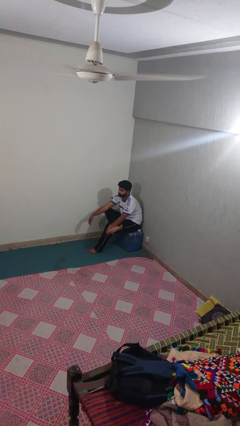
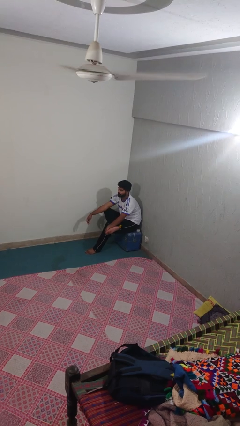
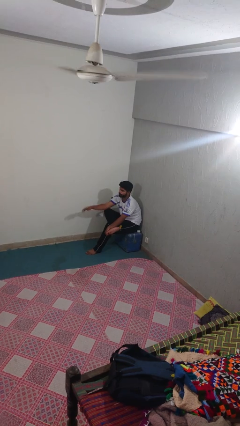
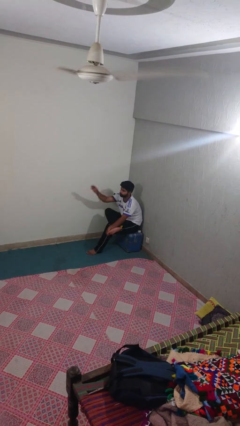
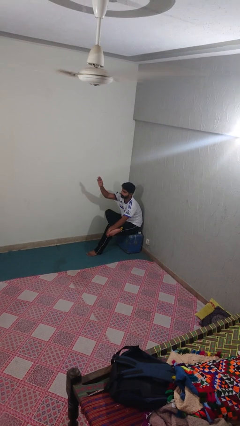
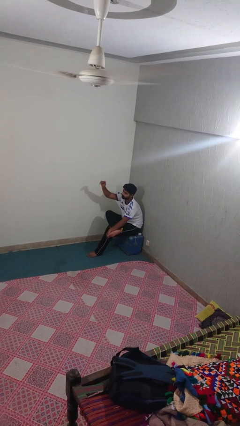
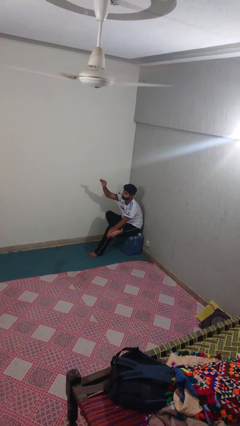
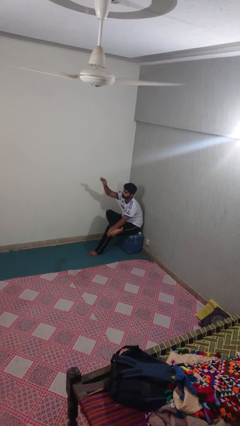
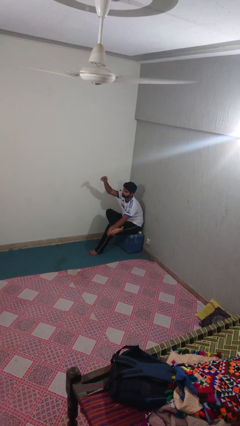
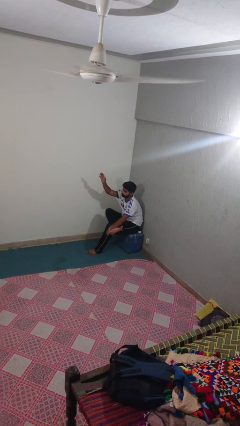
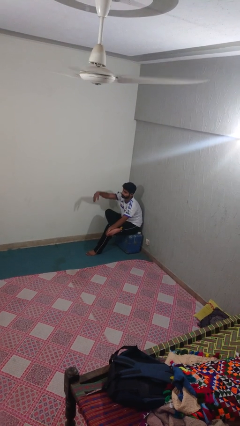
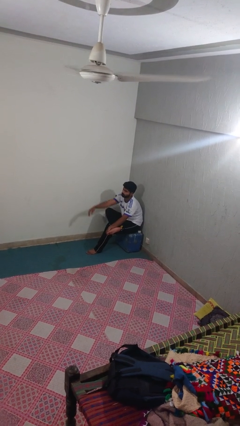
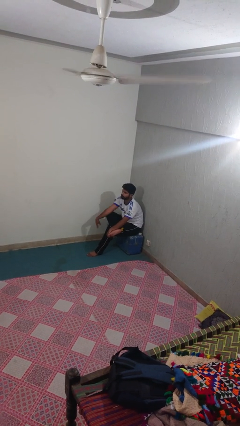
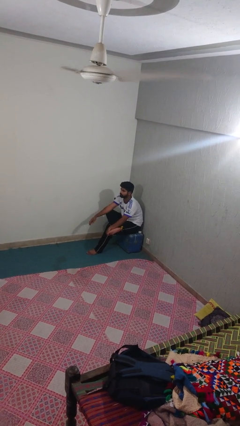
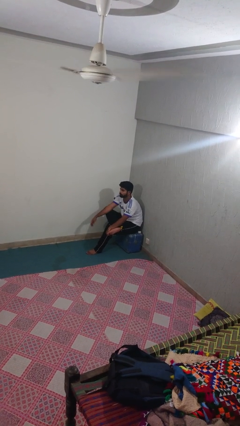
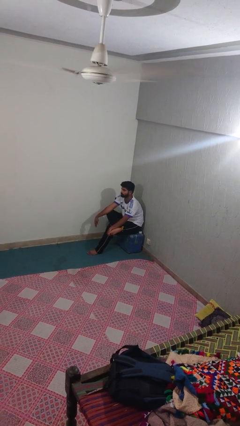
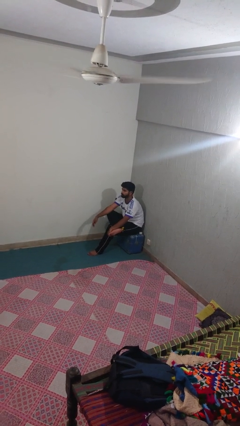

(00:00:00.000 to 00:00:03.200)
person gestures come here

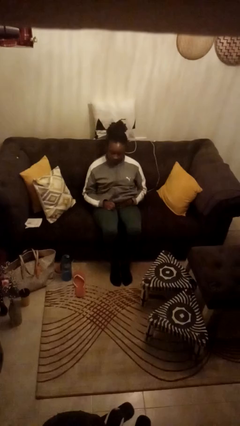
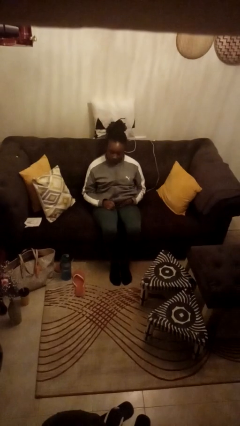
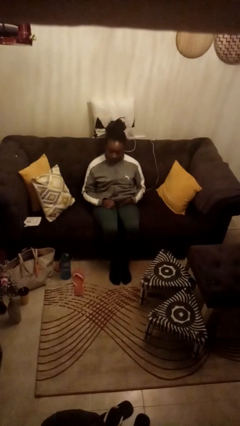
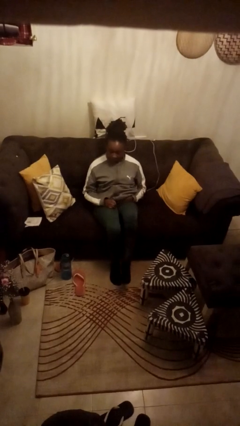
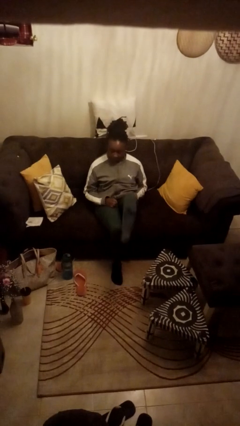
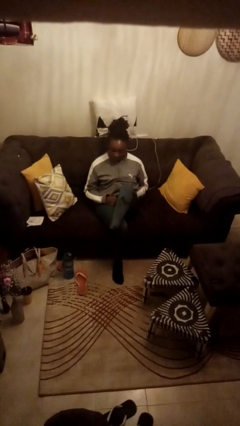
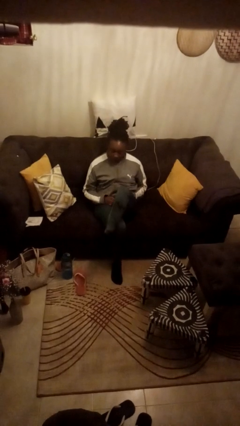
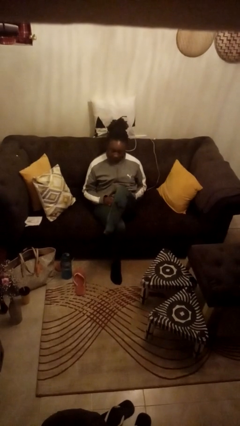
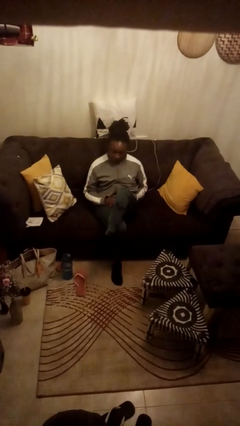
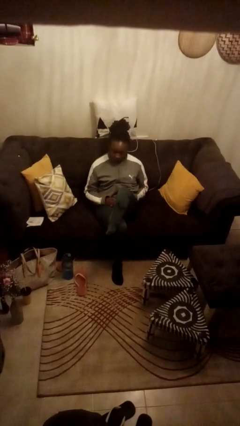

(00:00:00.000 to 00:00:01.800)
person crosses legs

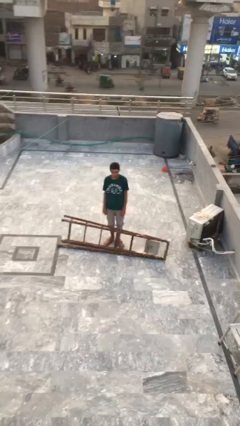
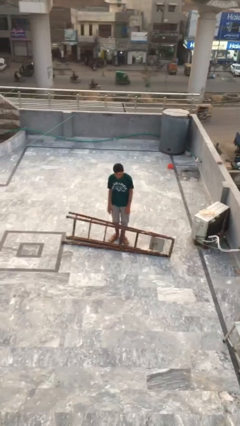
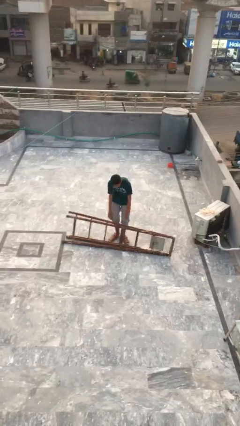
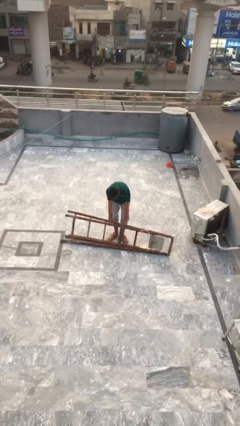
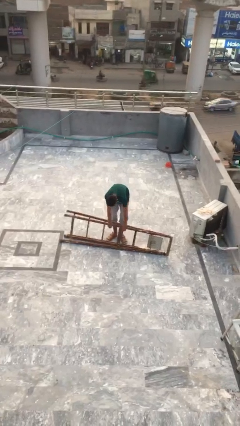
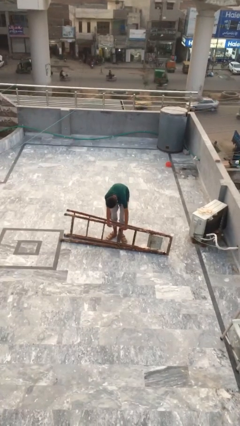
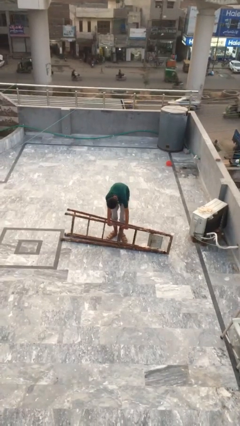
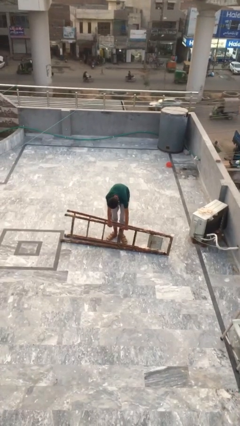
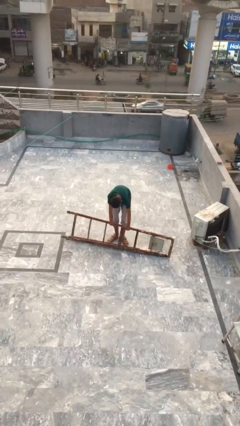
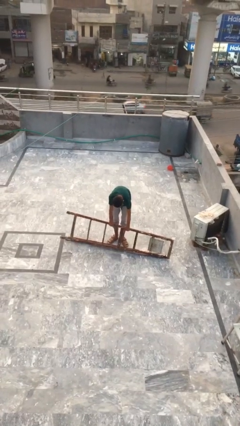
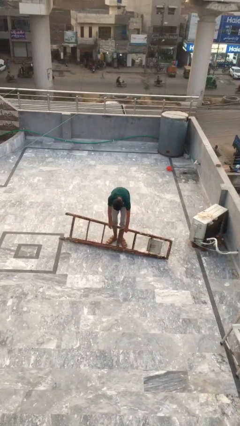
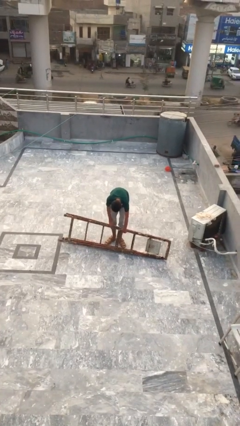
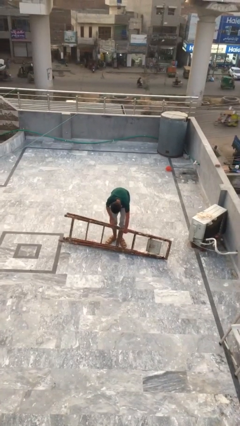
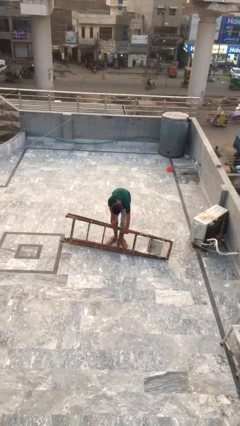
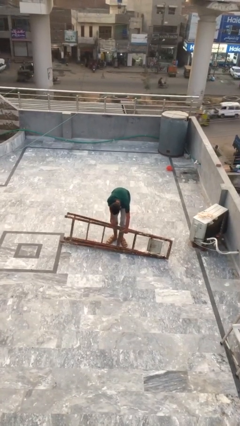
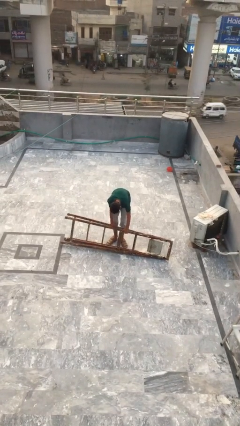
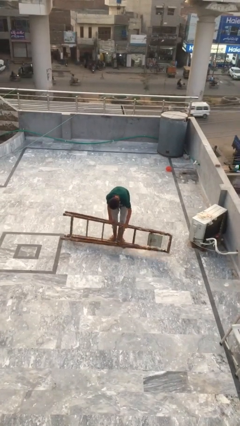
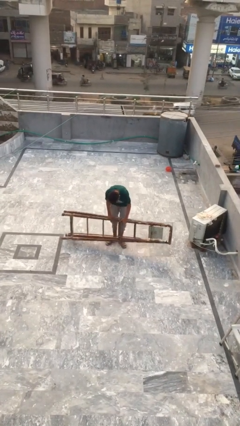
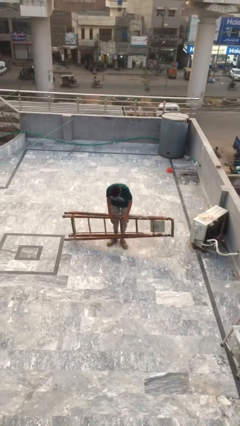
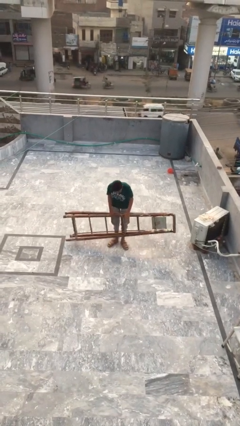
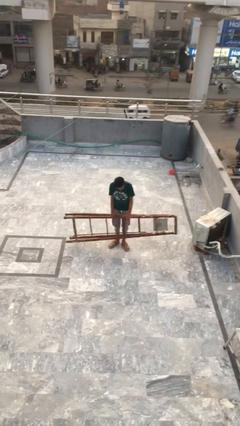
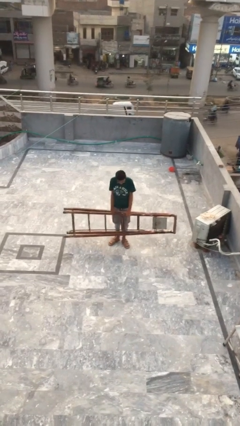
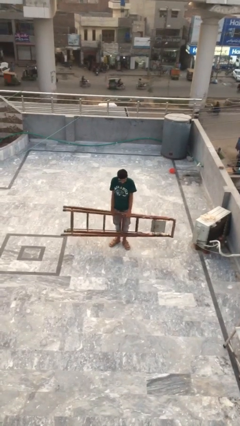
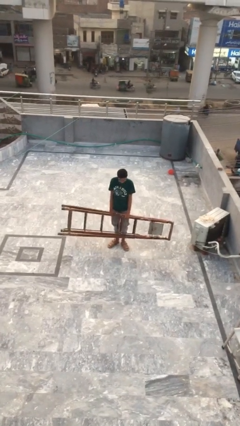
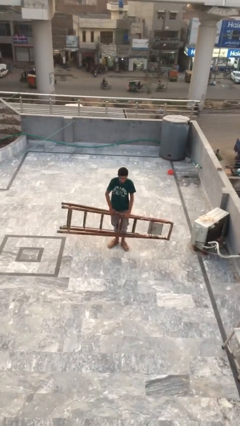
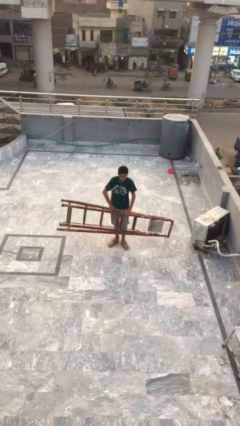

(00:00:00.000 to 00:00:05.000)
person picks up object from floor

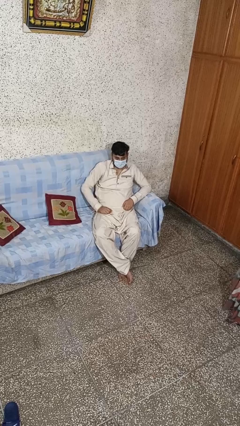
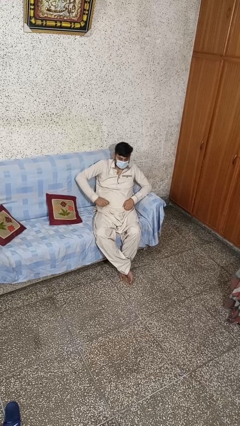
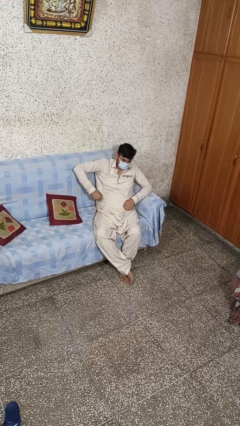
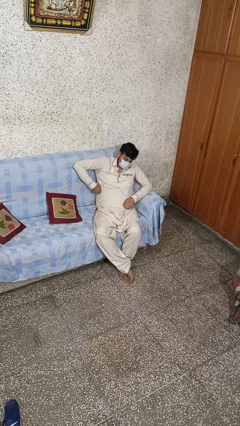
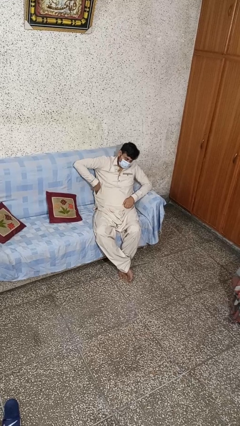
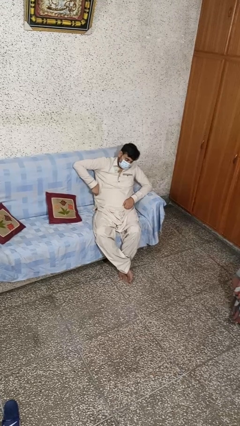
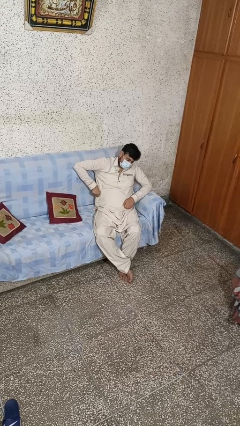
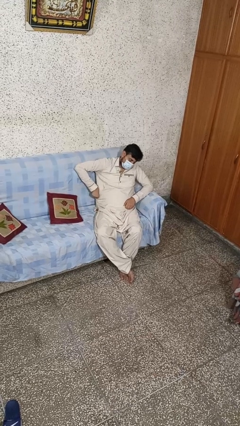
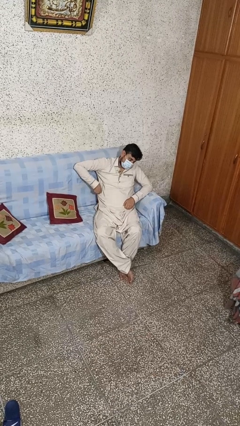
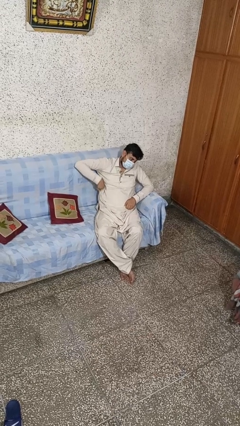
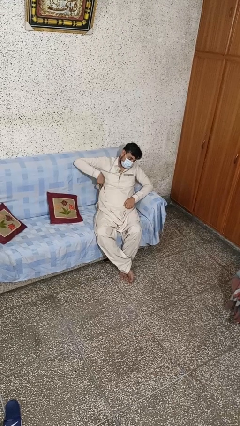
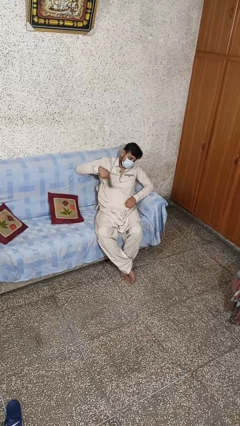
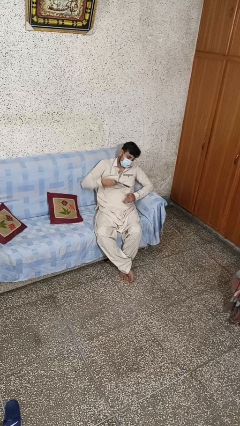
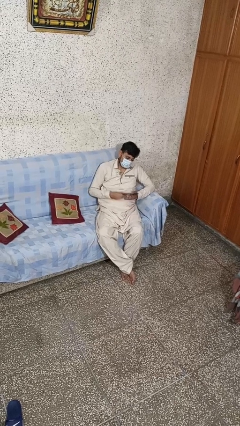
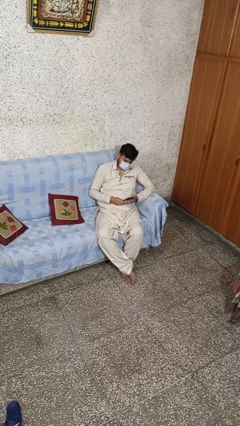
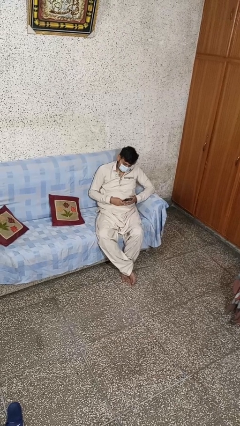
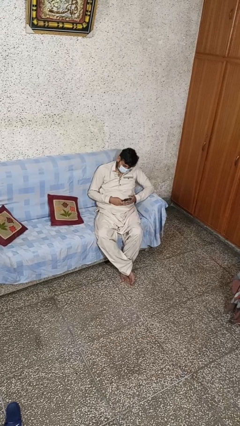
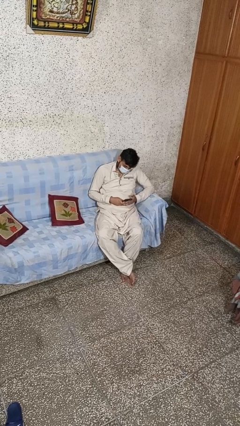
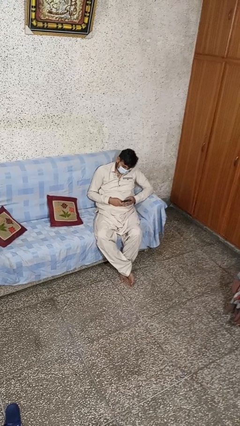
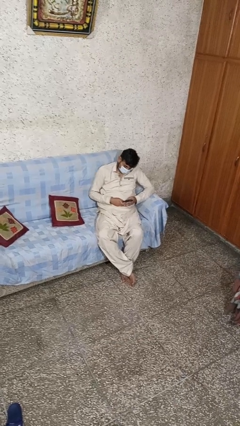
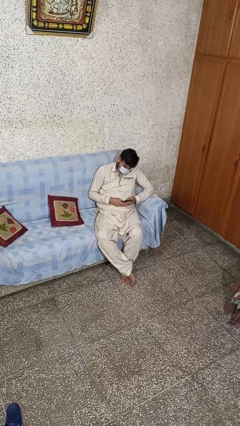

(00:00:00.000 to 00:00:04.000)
person takes phone from pocket

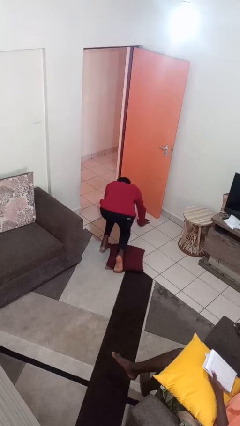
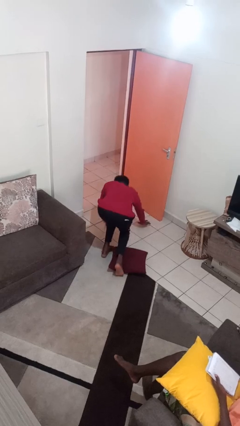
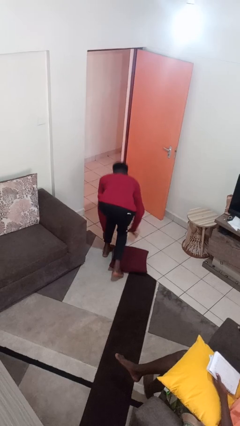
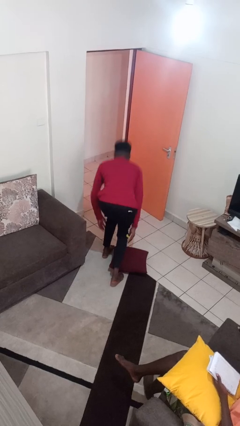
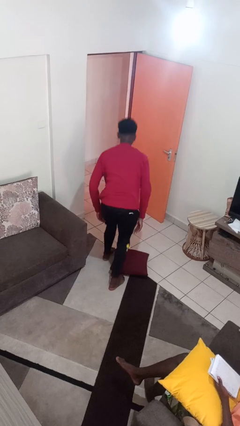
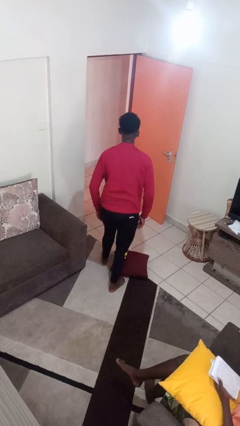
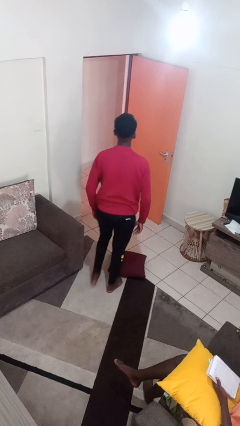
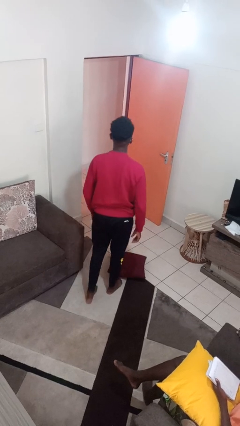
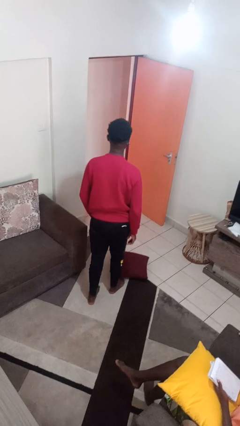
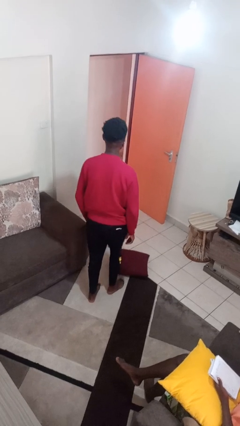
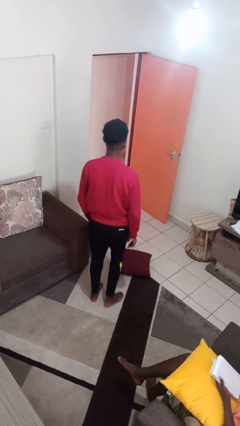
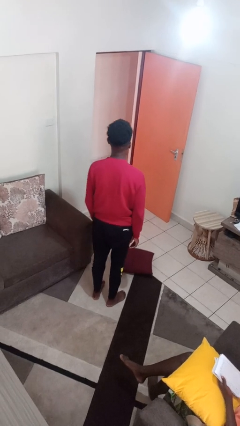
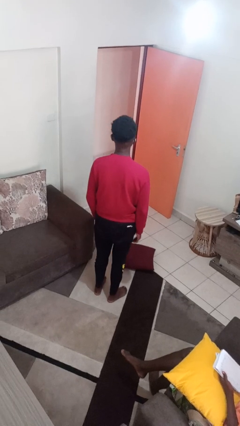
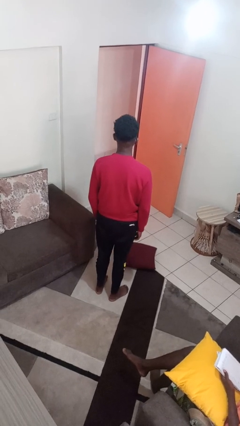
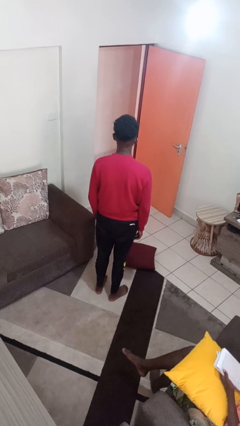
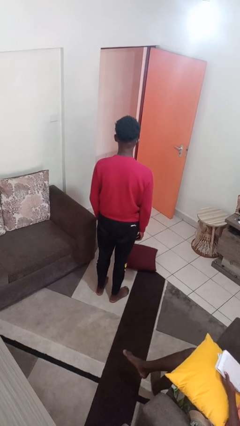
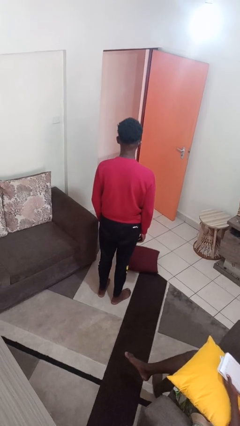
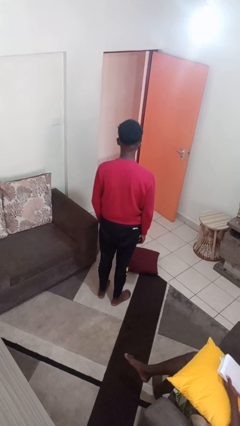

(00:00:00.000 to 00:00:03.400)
person stands up from floor
